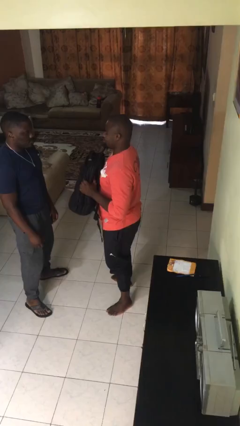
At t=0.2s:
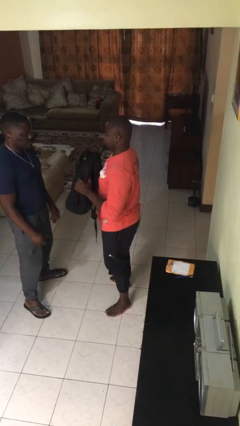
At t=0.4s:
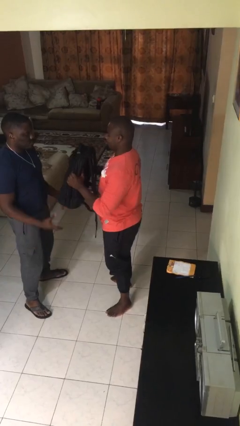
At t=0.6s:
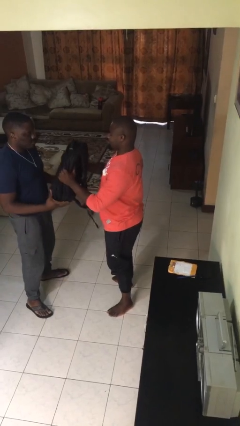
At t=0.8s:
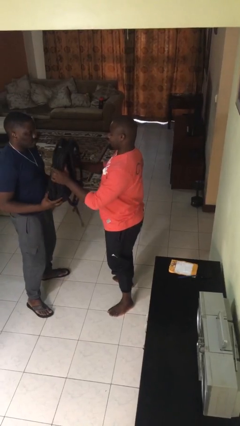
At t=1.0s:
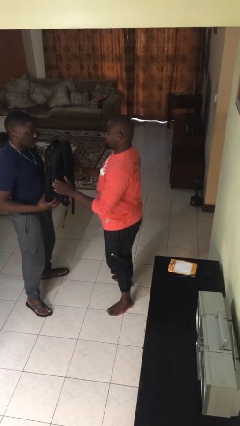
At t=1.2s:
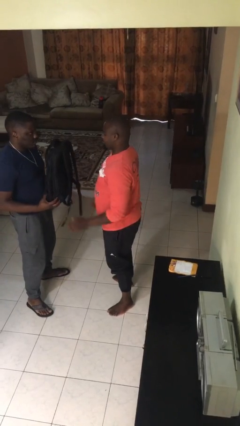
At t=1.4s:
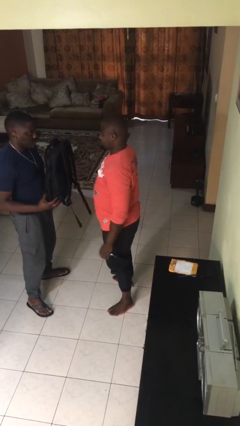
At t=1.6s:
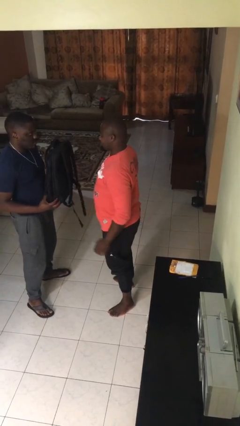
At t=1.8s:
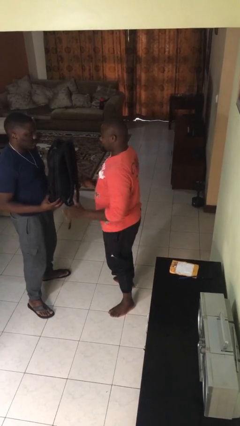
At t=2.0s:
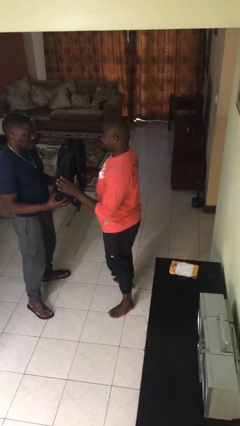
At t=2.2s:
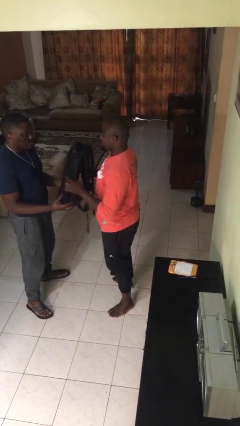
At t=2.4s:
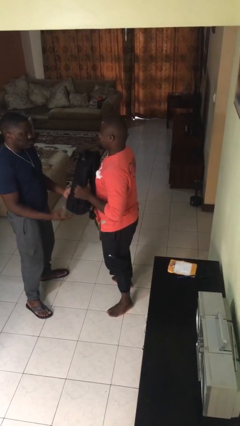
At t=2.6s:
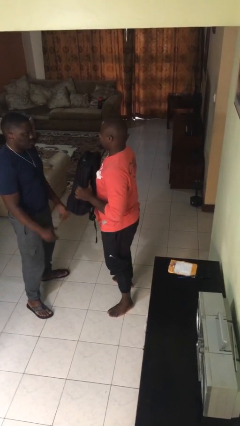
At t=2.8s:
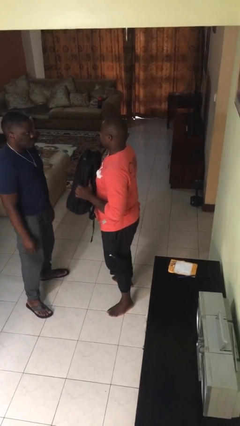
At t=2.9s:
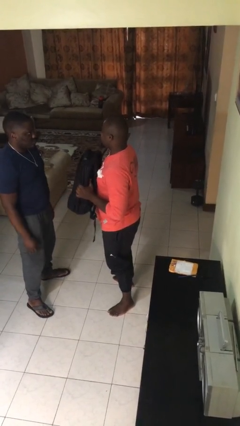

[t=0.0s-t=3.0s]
person transfers object to person

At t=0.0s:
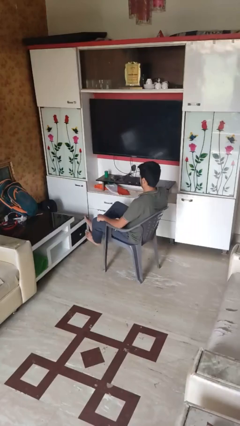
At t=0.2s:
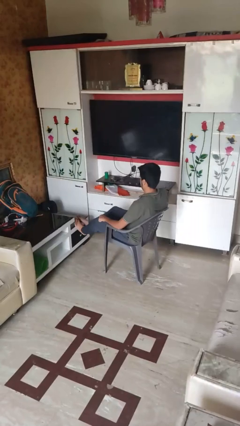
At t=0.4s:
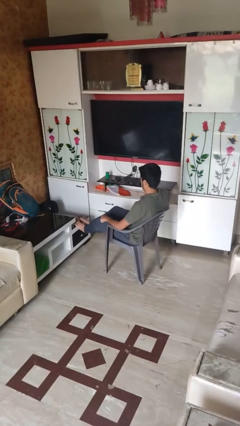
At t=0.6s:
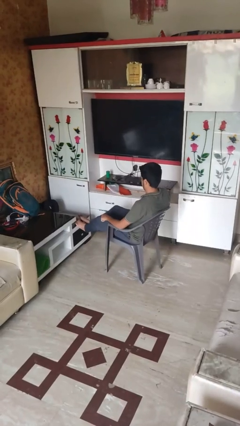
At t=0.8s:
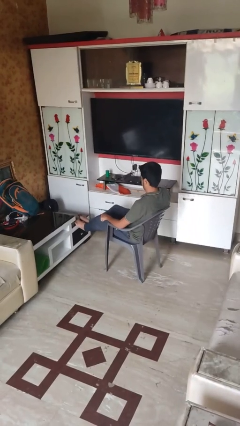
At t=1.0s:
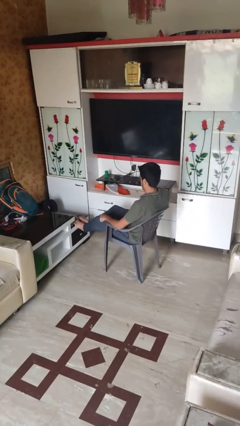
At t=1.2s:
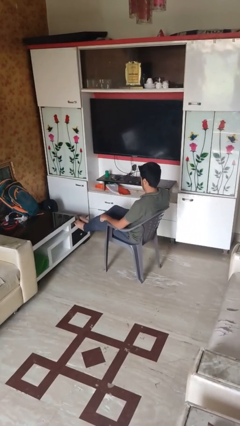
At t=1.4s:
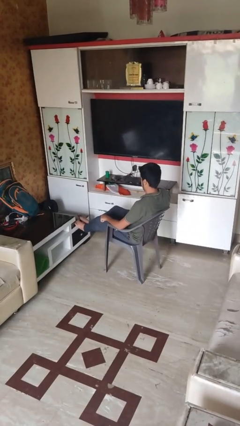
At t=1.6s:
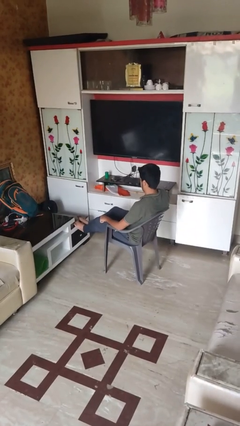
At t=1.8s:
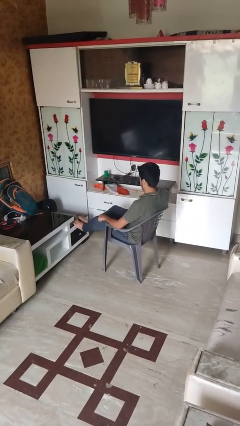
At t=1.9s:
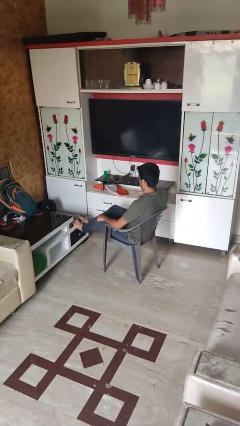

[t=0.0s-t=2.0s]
person puts feet up

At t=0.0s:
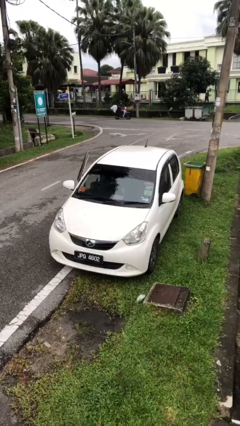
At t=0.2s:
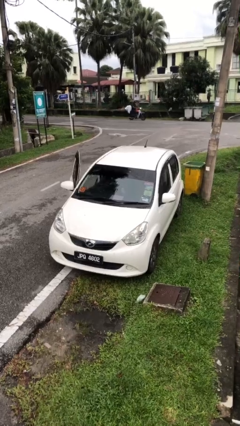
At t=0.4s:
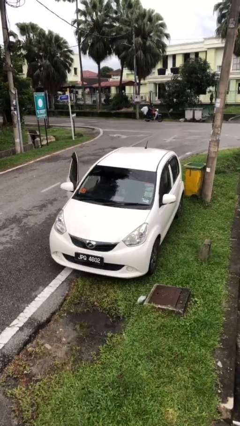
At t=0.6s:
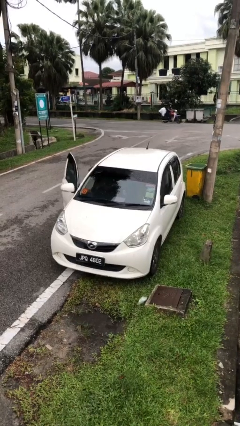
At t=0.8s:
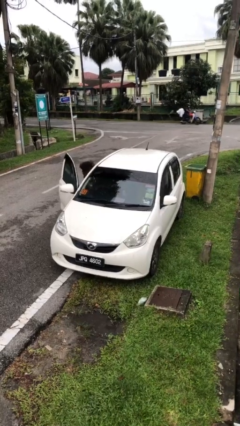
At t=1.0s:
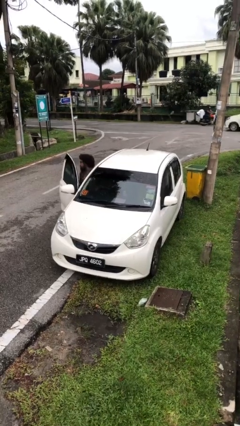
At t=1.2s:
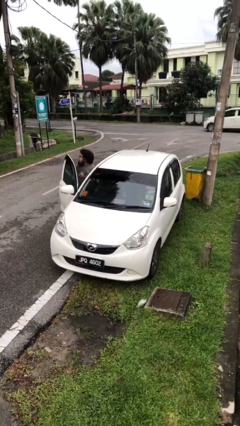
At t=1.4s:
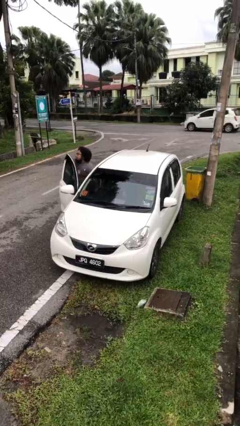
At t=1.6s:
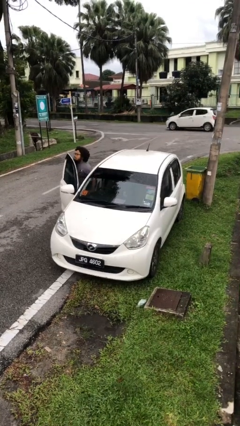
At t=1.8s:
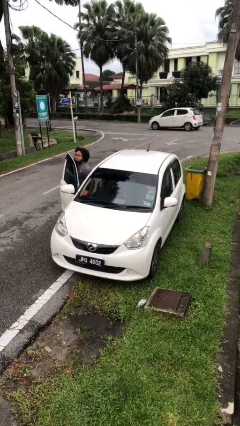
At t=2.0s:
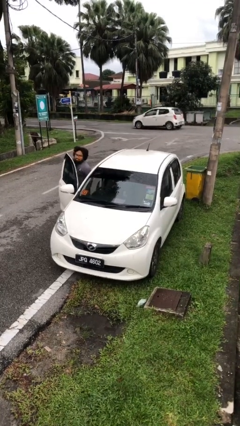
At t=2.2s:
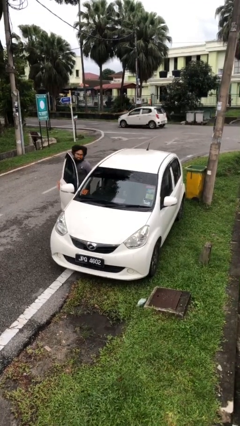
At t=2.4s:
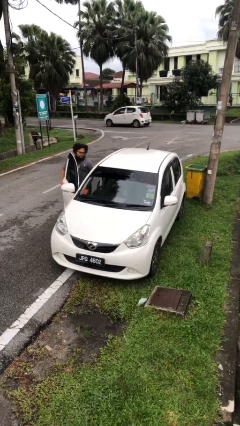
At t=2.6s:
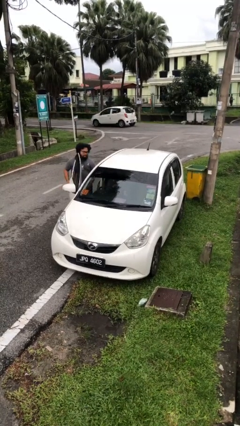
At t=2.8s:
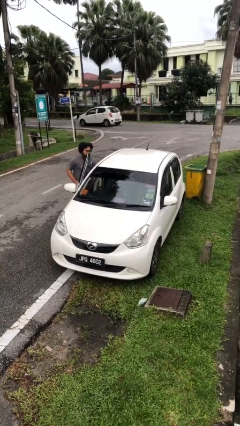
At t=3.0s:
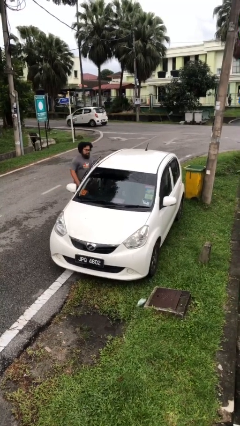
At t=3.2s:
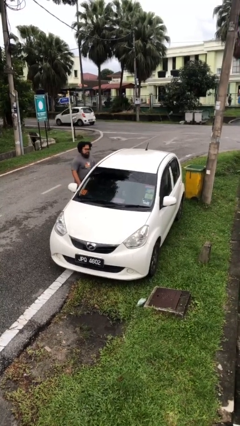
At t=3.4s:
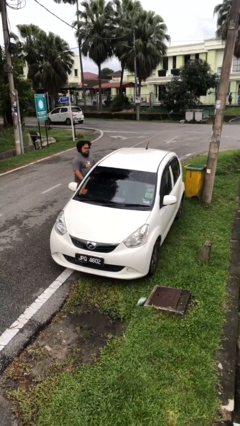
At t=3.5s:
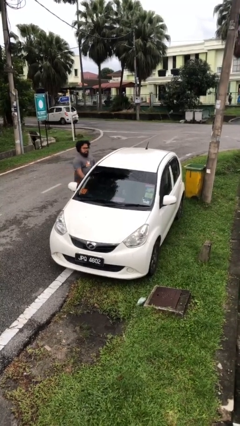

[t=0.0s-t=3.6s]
car drops off person

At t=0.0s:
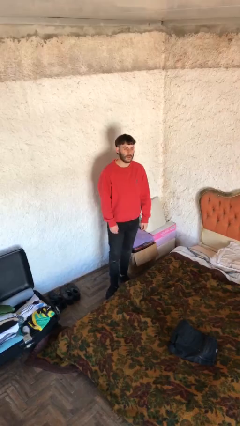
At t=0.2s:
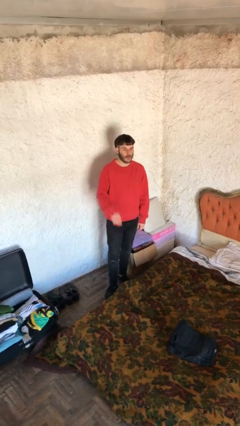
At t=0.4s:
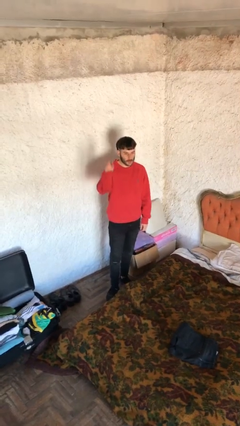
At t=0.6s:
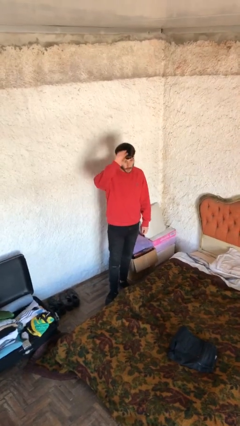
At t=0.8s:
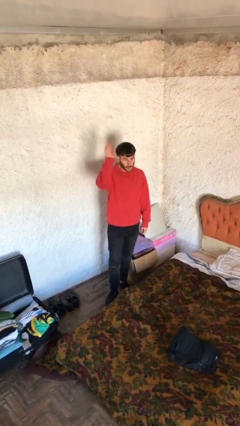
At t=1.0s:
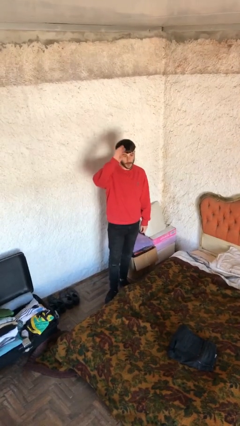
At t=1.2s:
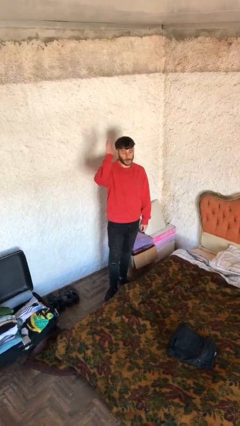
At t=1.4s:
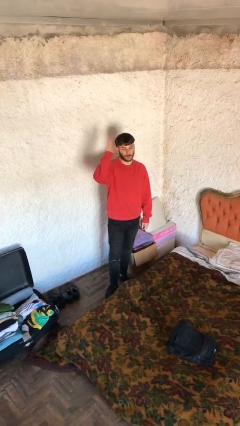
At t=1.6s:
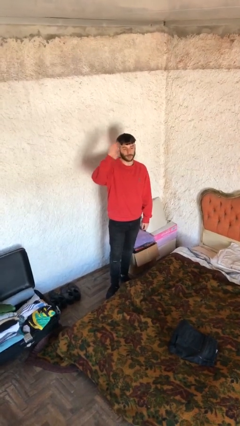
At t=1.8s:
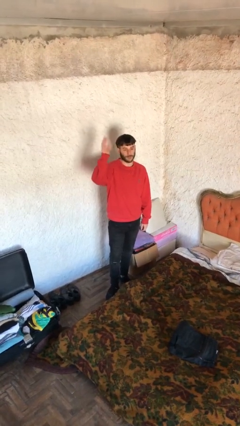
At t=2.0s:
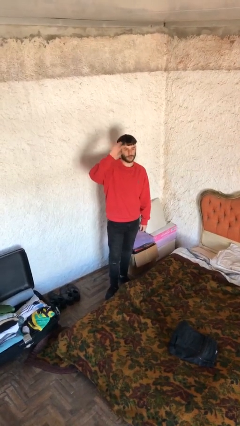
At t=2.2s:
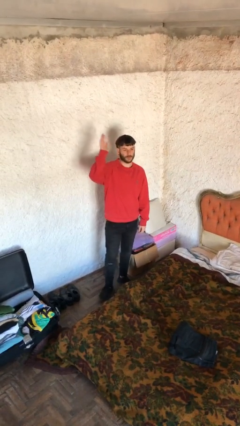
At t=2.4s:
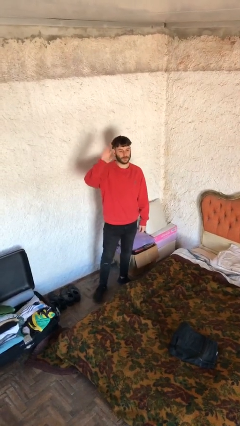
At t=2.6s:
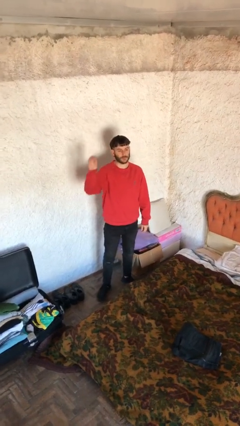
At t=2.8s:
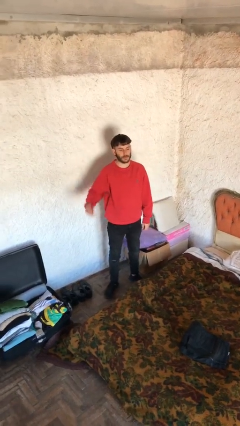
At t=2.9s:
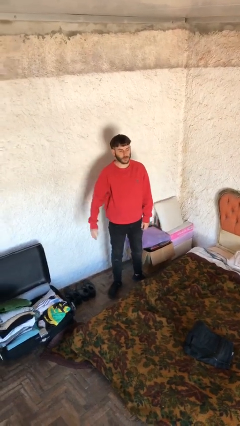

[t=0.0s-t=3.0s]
person waves at person

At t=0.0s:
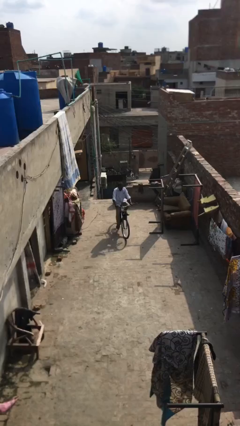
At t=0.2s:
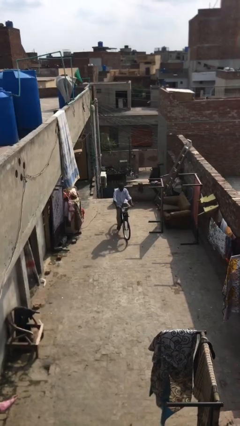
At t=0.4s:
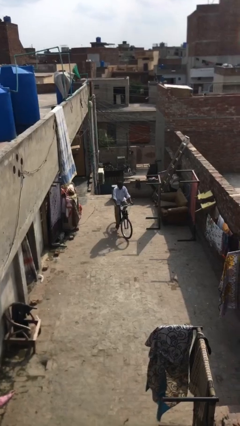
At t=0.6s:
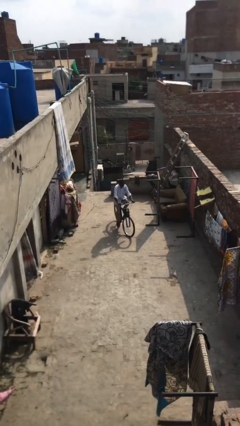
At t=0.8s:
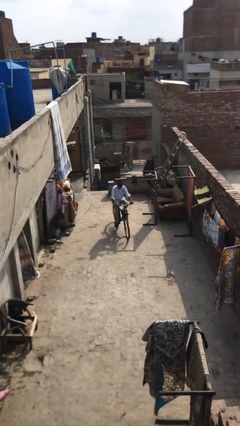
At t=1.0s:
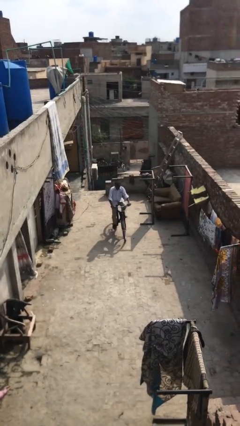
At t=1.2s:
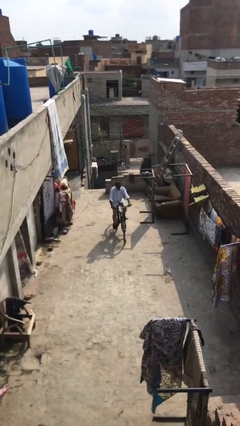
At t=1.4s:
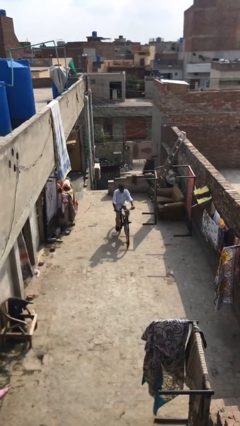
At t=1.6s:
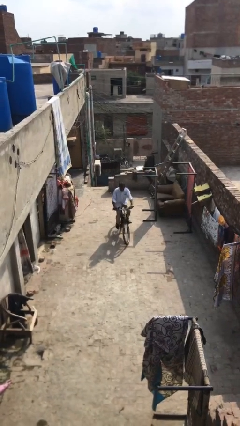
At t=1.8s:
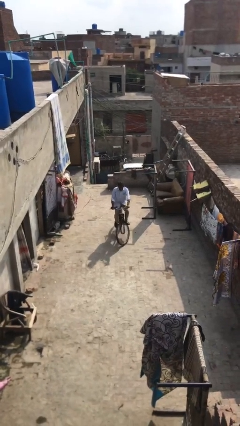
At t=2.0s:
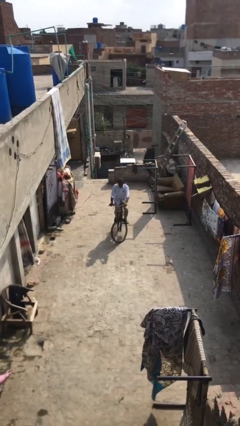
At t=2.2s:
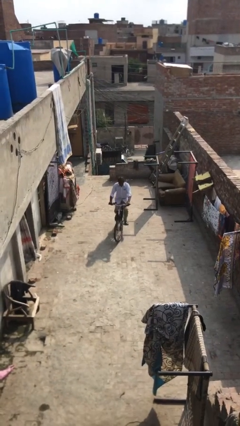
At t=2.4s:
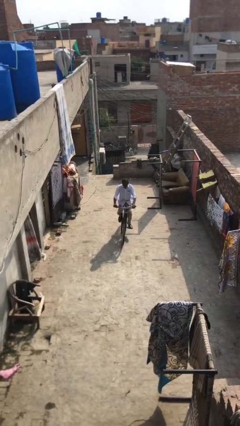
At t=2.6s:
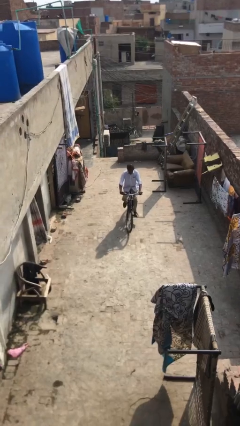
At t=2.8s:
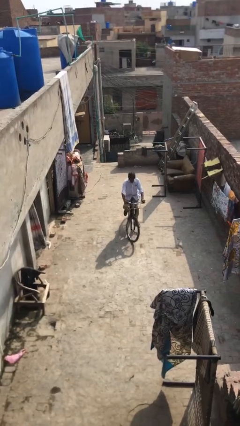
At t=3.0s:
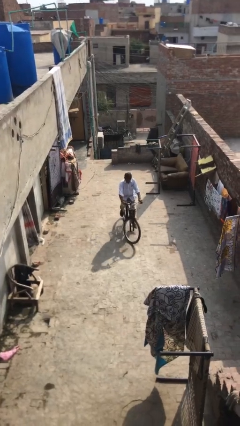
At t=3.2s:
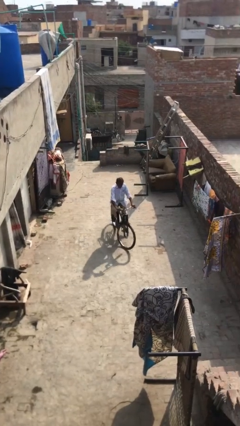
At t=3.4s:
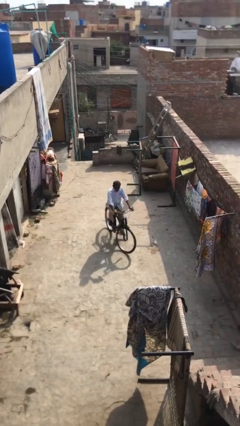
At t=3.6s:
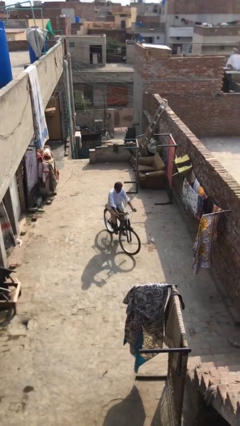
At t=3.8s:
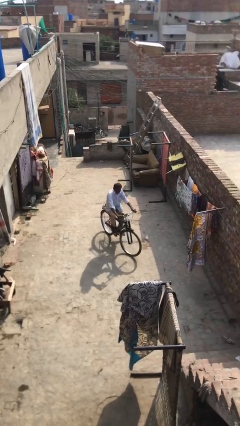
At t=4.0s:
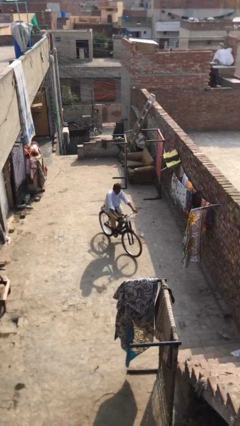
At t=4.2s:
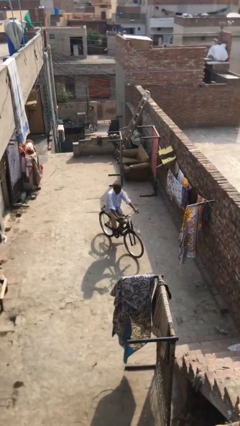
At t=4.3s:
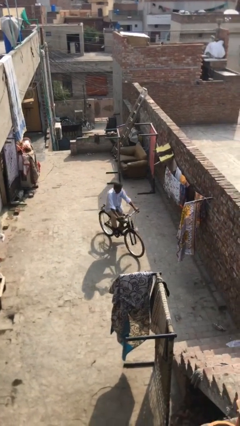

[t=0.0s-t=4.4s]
person rides bicycle

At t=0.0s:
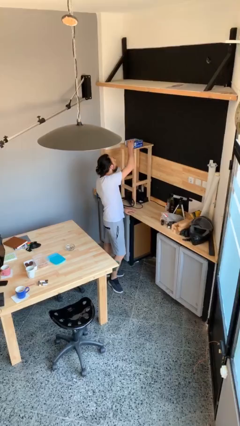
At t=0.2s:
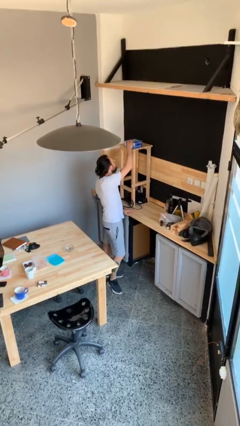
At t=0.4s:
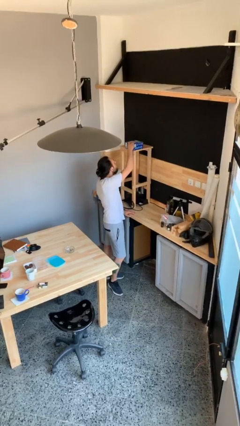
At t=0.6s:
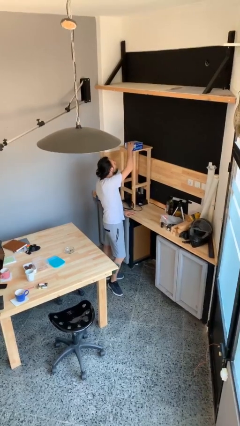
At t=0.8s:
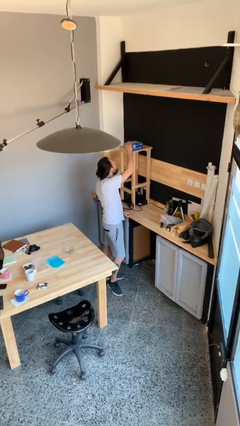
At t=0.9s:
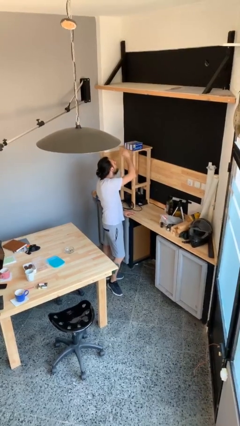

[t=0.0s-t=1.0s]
person puts down object on shelf
